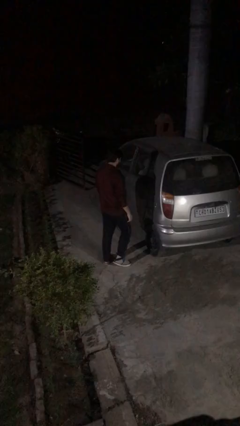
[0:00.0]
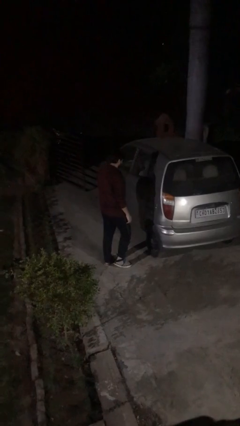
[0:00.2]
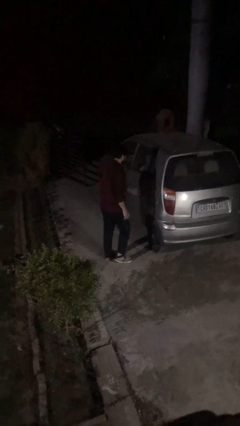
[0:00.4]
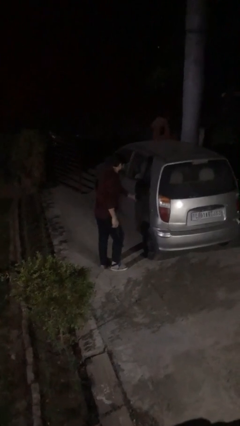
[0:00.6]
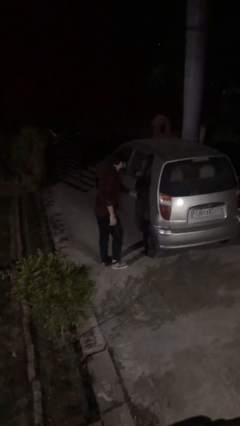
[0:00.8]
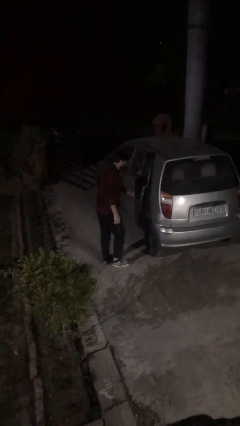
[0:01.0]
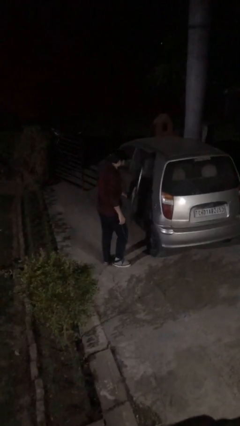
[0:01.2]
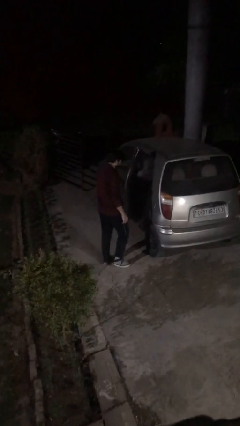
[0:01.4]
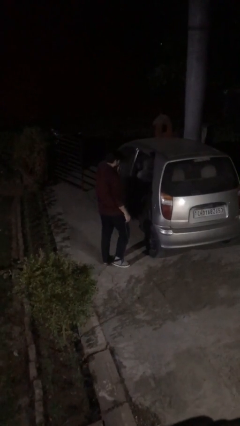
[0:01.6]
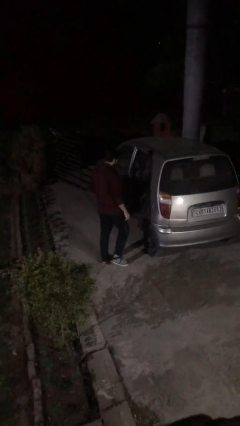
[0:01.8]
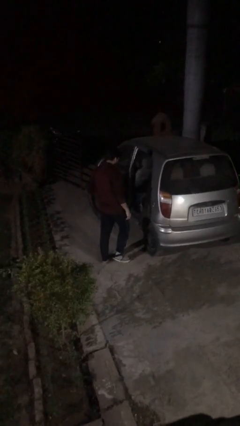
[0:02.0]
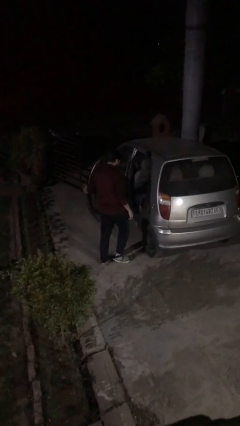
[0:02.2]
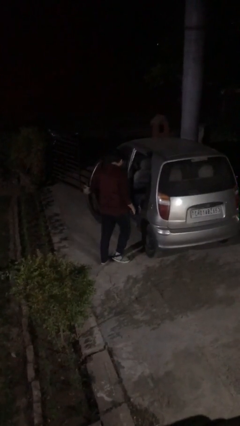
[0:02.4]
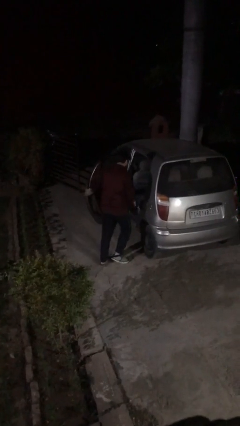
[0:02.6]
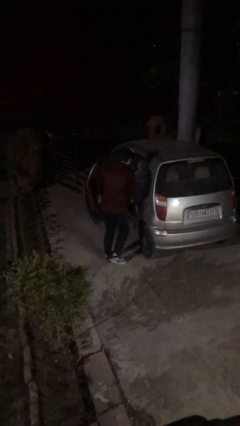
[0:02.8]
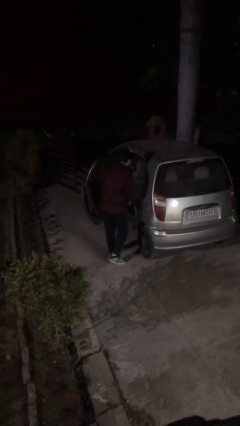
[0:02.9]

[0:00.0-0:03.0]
person opens car door

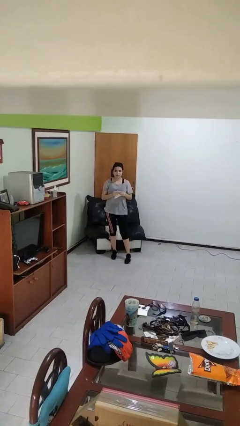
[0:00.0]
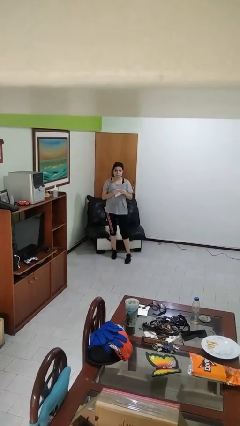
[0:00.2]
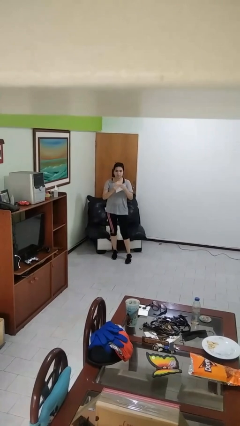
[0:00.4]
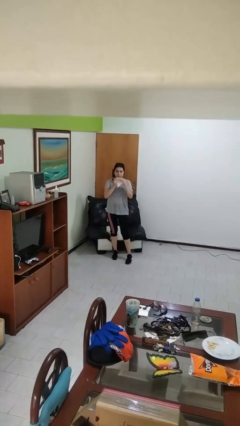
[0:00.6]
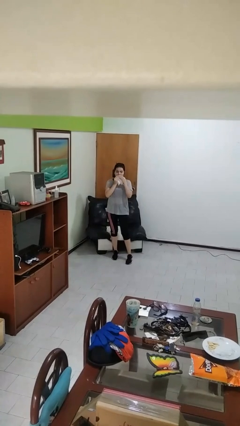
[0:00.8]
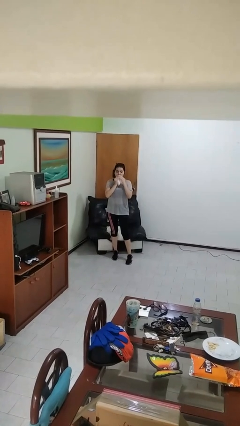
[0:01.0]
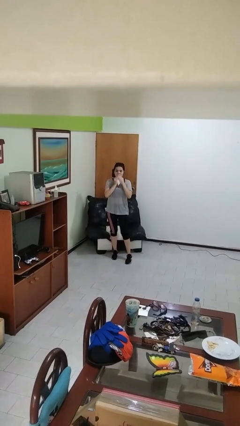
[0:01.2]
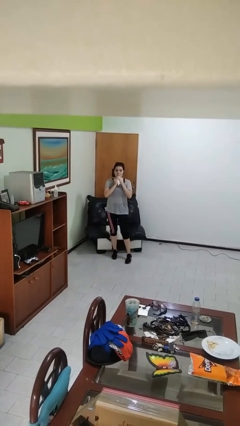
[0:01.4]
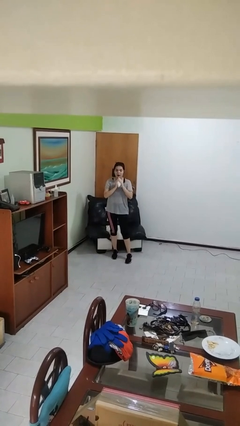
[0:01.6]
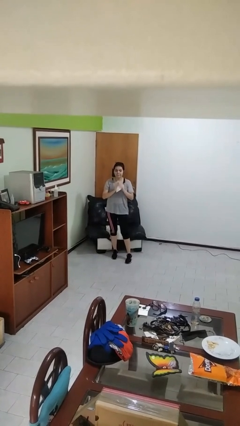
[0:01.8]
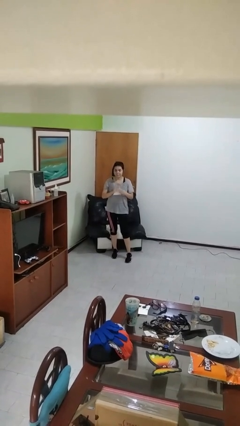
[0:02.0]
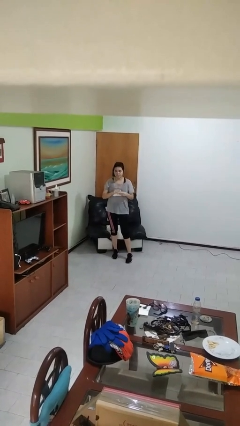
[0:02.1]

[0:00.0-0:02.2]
person wipes mouth with napkin

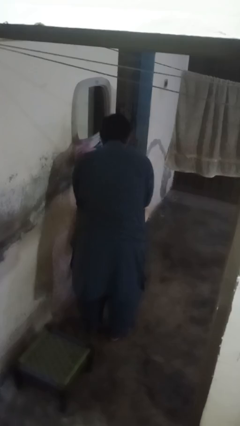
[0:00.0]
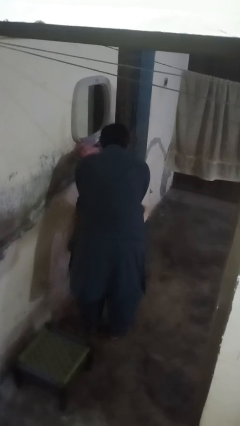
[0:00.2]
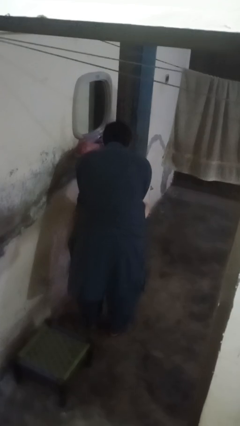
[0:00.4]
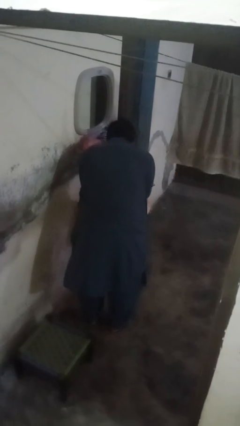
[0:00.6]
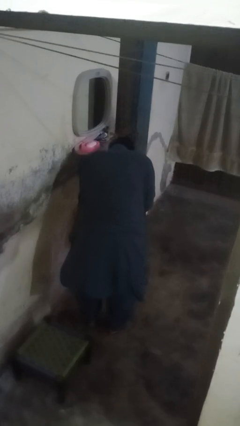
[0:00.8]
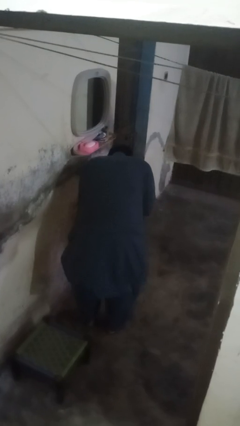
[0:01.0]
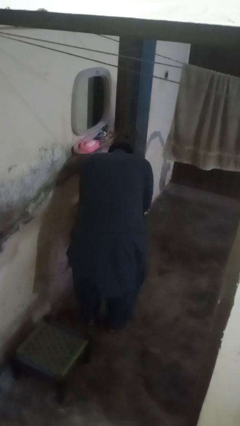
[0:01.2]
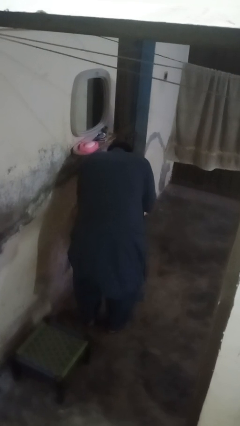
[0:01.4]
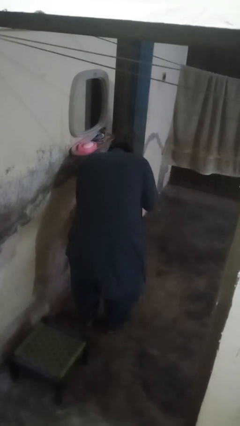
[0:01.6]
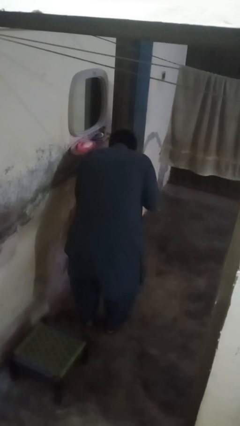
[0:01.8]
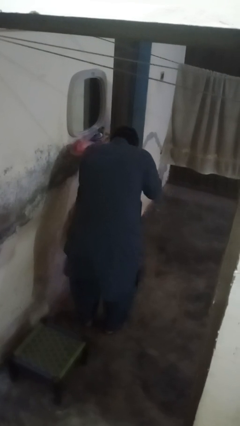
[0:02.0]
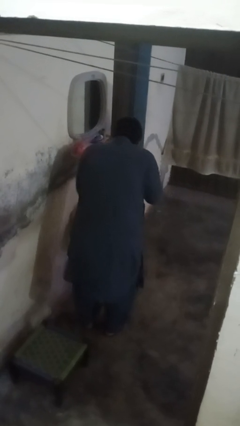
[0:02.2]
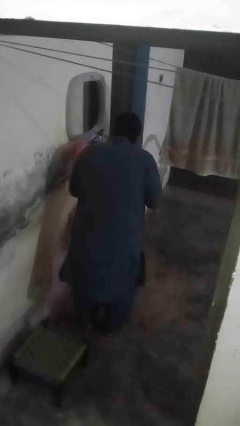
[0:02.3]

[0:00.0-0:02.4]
person washes face

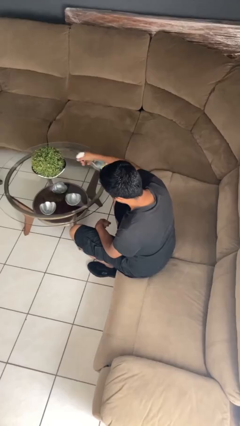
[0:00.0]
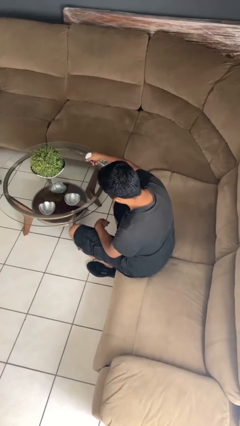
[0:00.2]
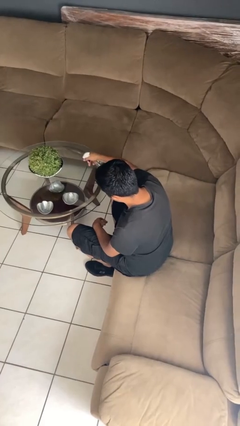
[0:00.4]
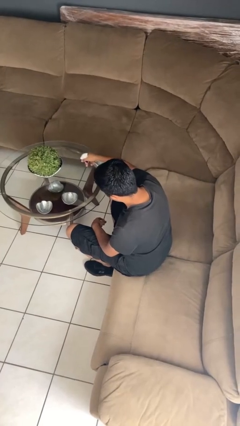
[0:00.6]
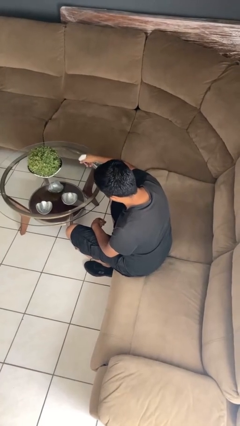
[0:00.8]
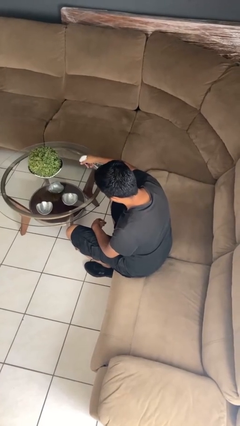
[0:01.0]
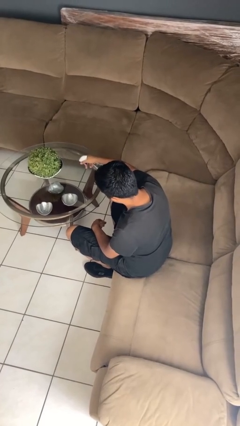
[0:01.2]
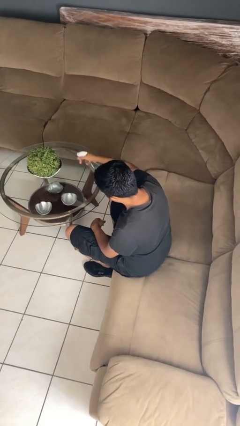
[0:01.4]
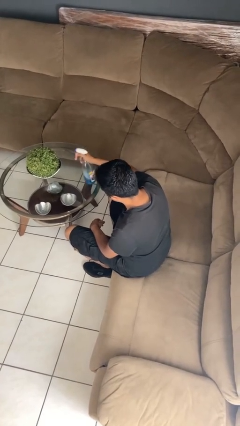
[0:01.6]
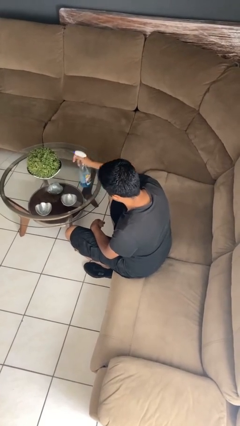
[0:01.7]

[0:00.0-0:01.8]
person sprays from bottle

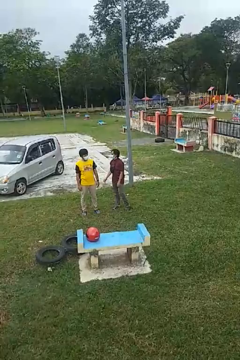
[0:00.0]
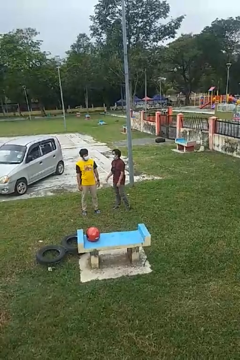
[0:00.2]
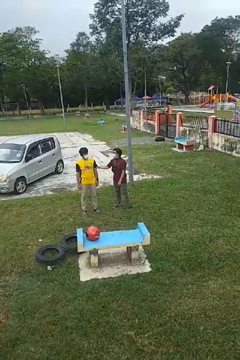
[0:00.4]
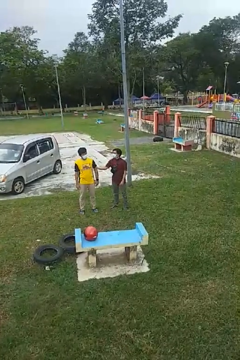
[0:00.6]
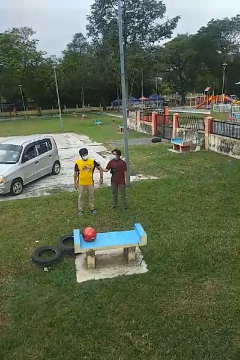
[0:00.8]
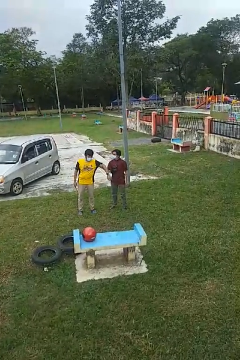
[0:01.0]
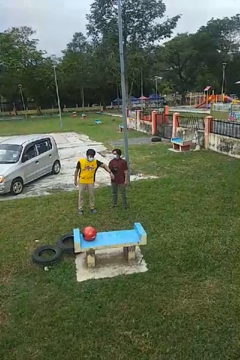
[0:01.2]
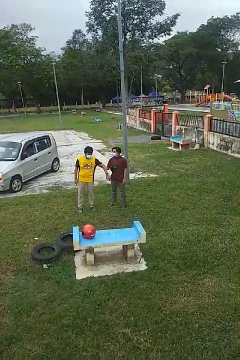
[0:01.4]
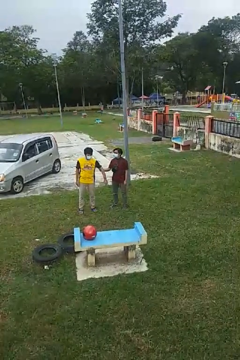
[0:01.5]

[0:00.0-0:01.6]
person grabs person by bicep

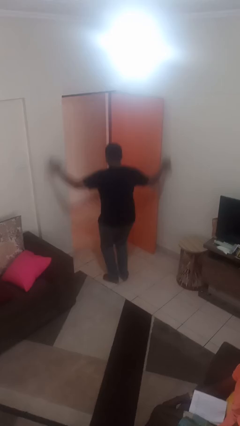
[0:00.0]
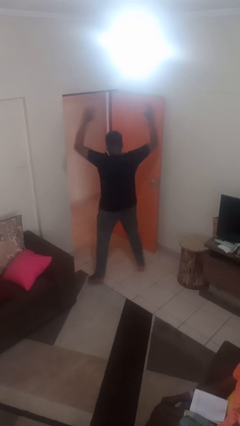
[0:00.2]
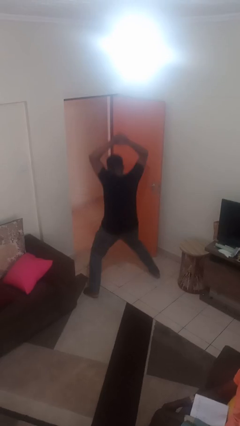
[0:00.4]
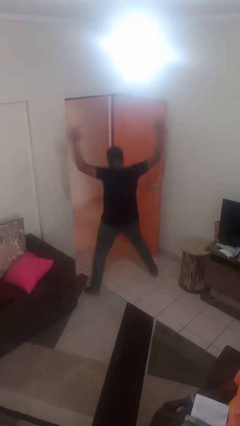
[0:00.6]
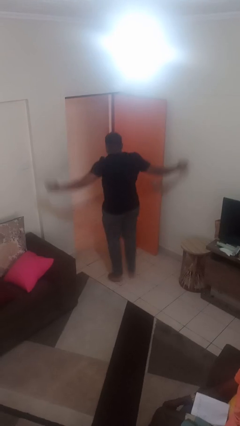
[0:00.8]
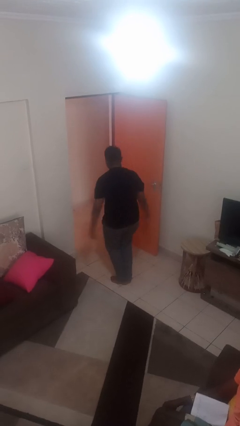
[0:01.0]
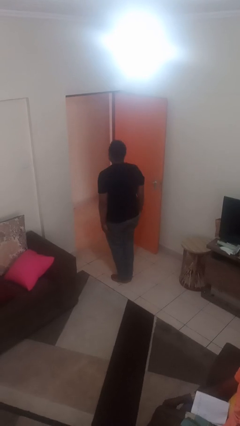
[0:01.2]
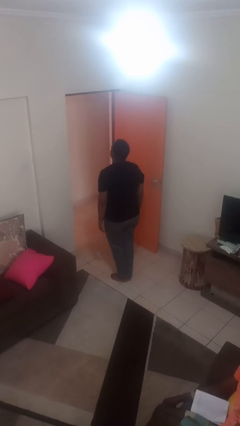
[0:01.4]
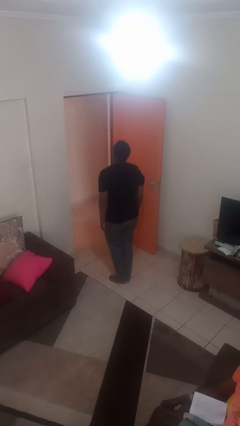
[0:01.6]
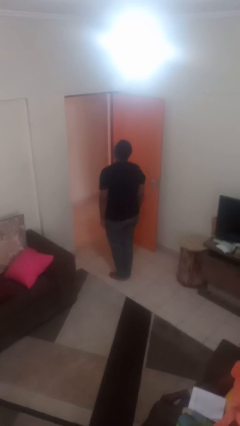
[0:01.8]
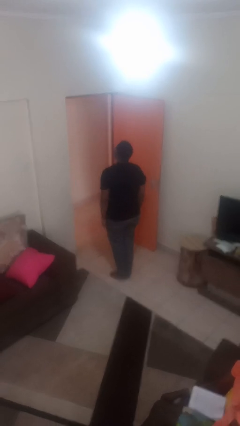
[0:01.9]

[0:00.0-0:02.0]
person exercises with jumping jacks

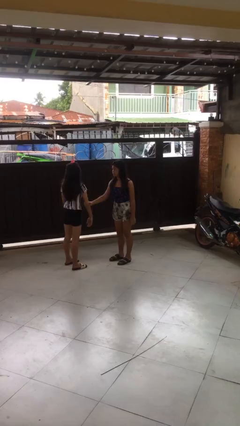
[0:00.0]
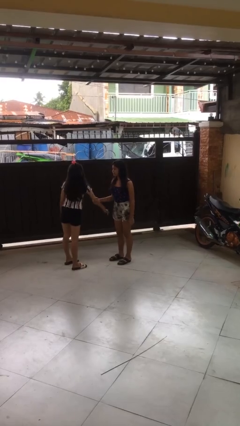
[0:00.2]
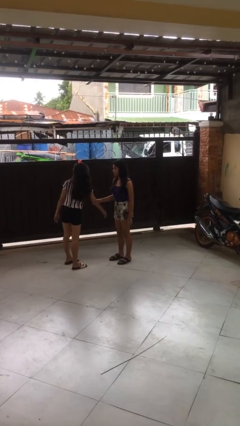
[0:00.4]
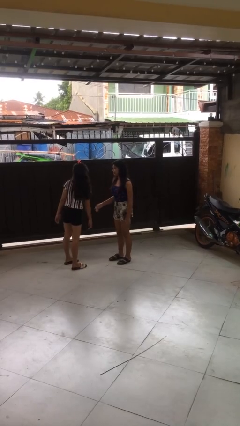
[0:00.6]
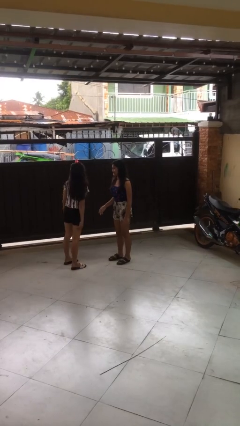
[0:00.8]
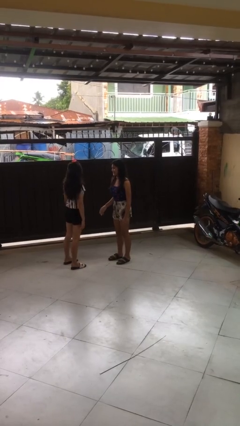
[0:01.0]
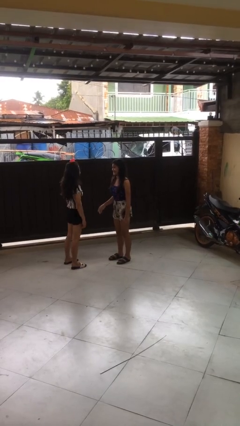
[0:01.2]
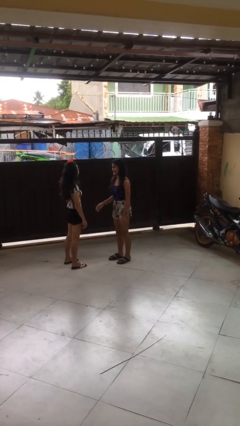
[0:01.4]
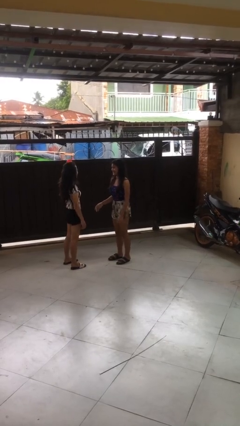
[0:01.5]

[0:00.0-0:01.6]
person grabs person by forearm

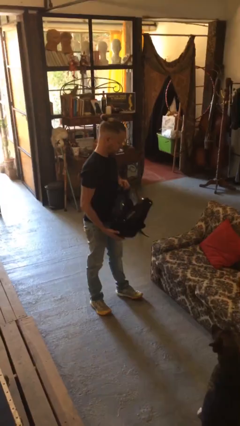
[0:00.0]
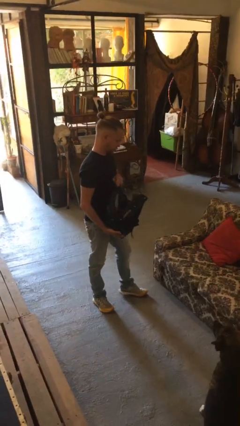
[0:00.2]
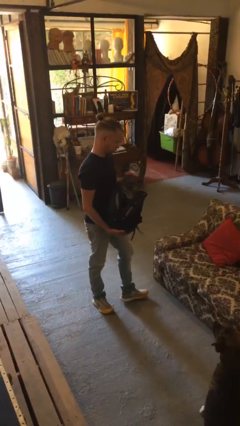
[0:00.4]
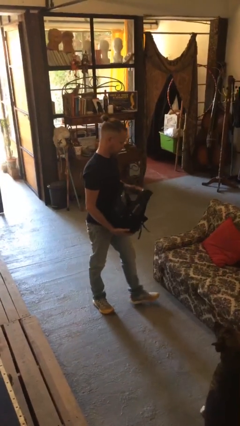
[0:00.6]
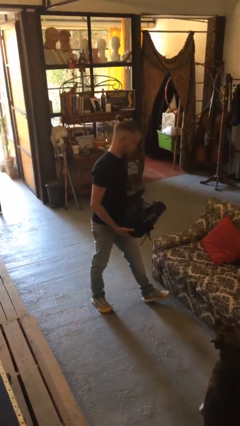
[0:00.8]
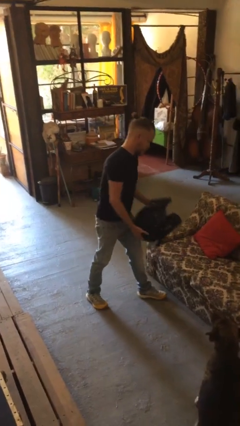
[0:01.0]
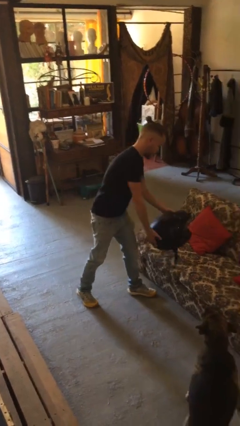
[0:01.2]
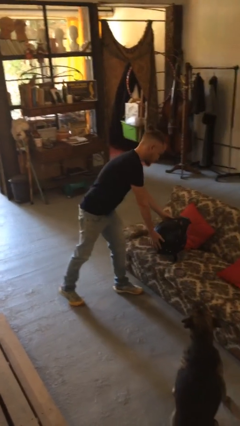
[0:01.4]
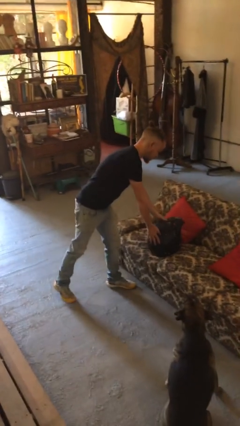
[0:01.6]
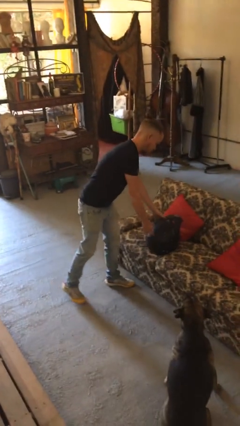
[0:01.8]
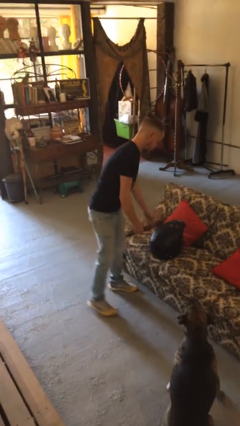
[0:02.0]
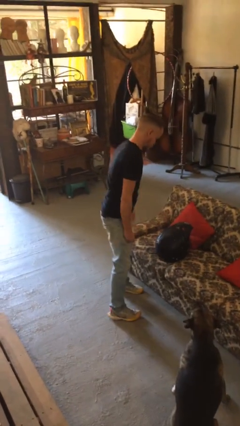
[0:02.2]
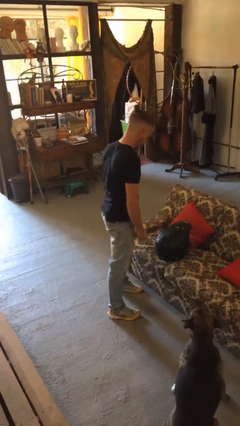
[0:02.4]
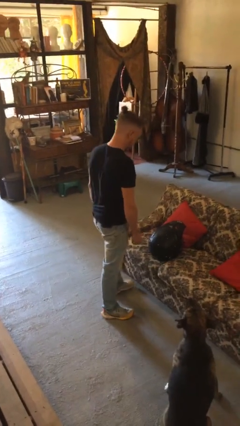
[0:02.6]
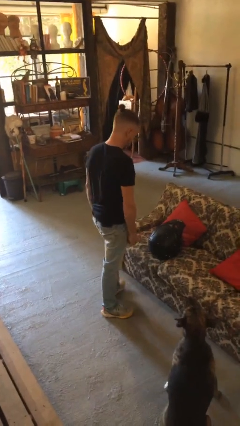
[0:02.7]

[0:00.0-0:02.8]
person puts down object on couch
